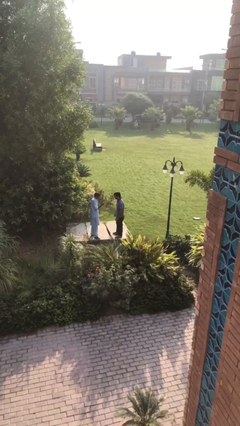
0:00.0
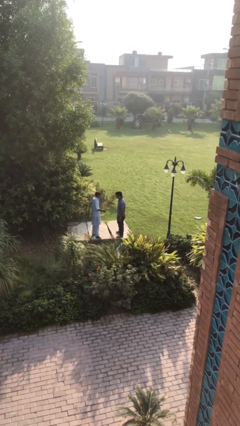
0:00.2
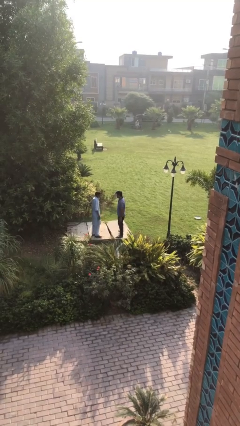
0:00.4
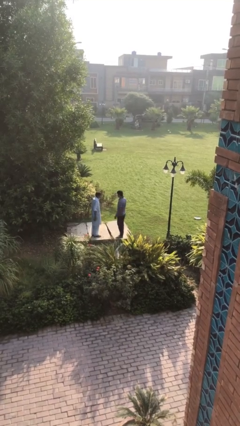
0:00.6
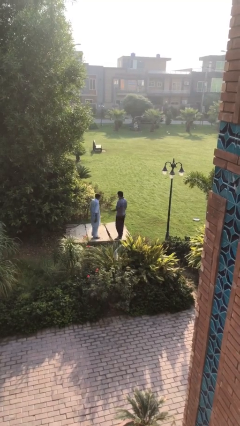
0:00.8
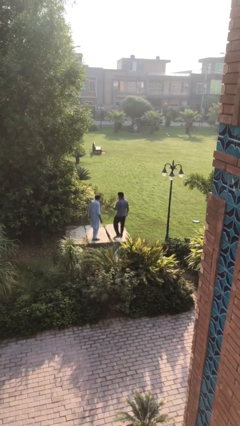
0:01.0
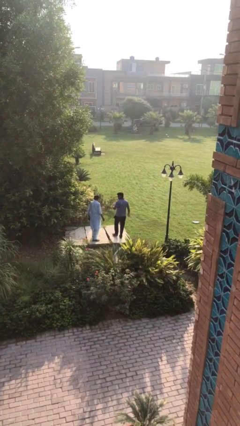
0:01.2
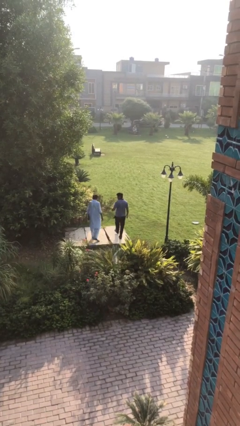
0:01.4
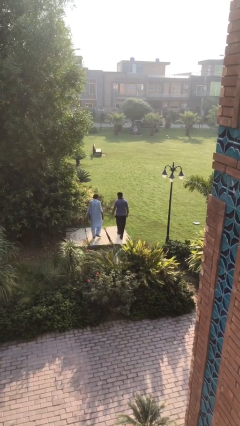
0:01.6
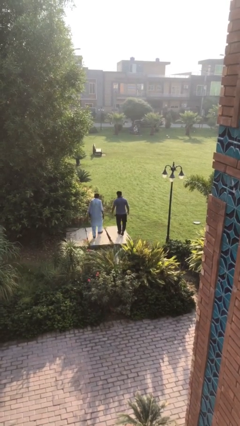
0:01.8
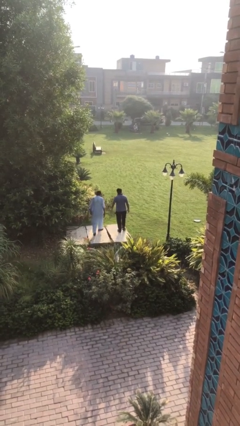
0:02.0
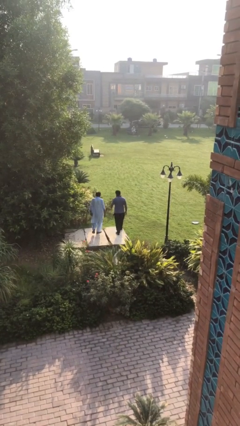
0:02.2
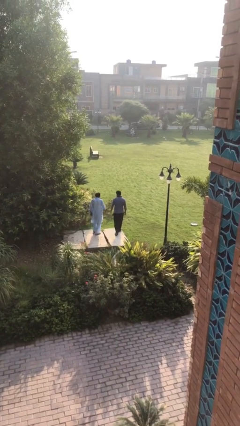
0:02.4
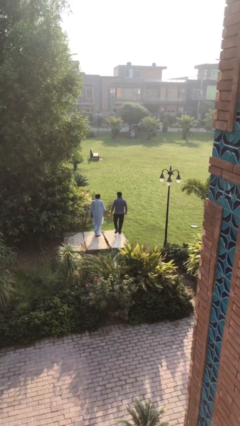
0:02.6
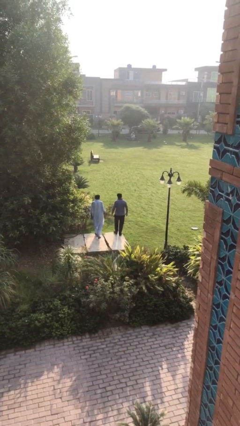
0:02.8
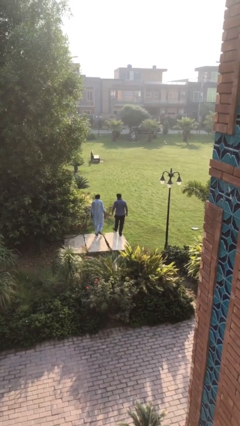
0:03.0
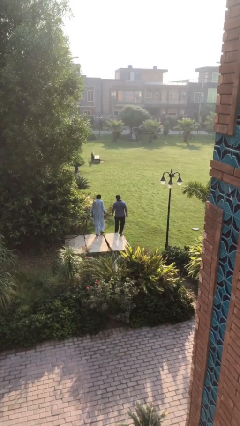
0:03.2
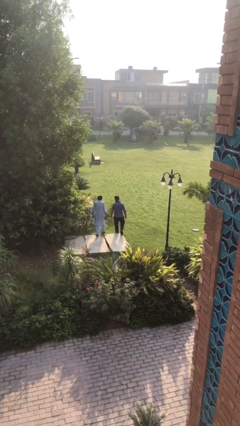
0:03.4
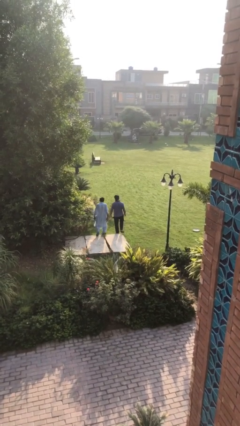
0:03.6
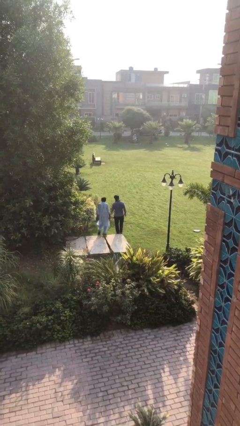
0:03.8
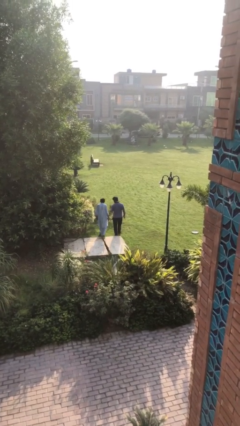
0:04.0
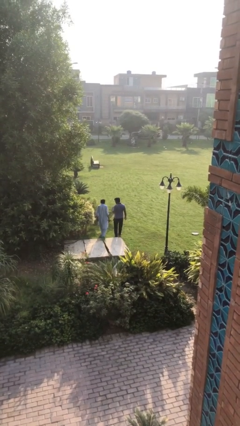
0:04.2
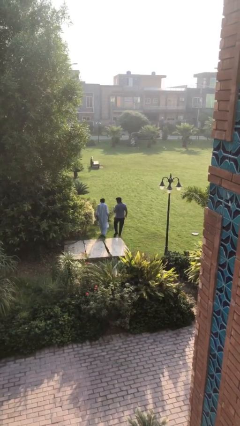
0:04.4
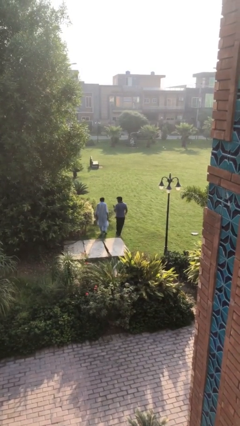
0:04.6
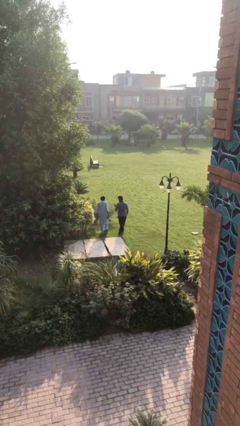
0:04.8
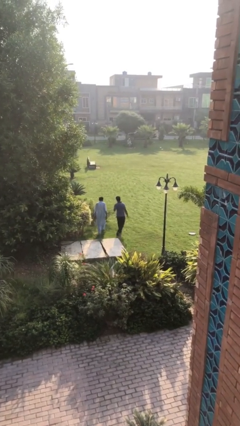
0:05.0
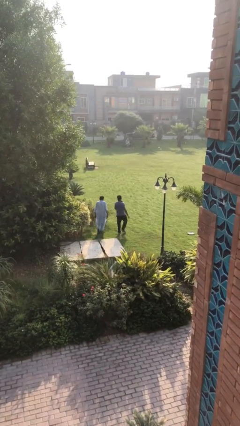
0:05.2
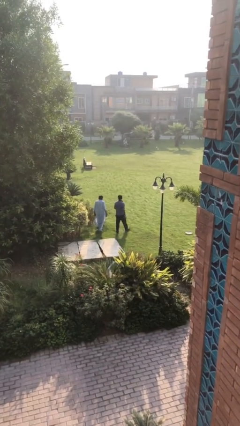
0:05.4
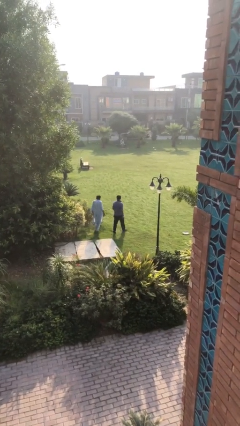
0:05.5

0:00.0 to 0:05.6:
person talks to person

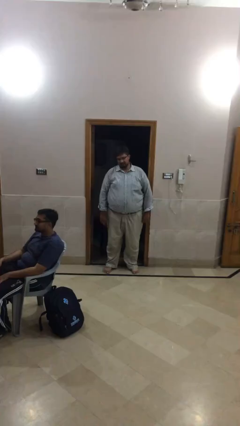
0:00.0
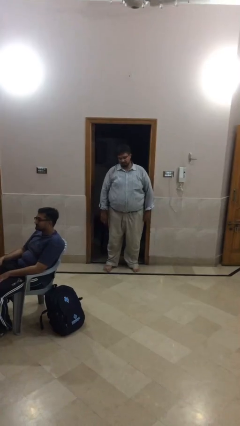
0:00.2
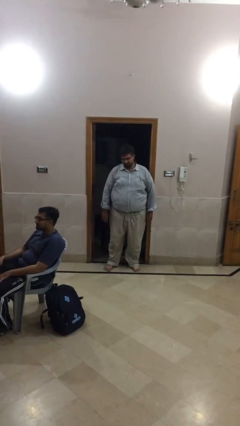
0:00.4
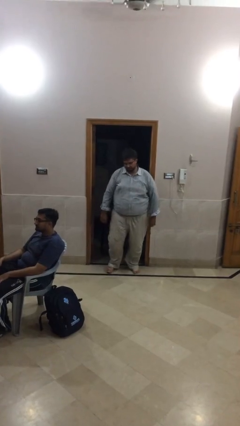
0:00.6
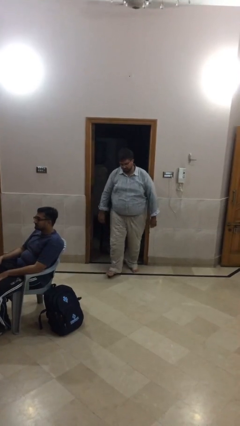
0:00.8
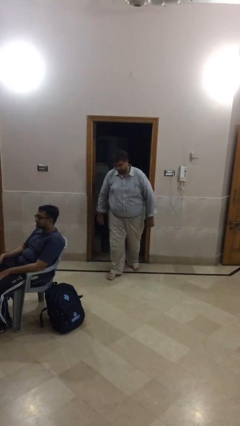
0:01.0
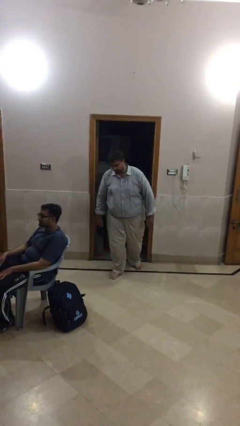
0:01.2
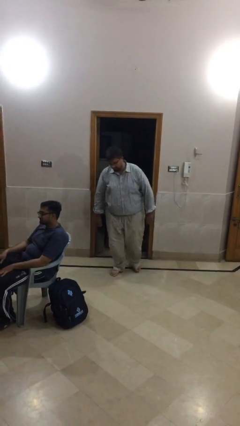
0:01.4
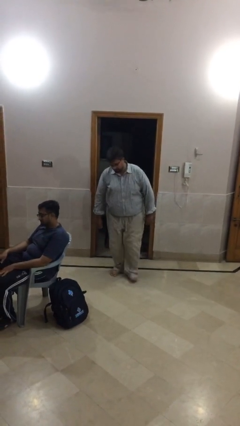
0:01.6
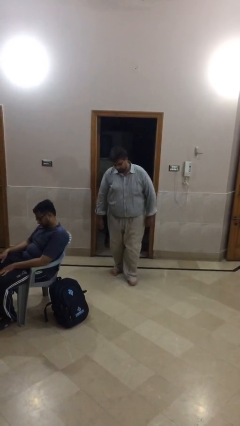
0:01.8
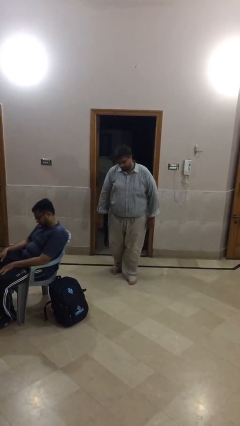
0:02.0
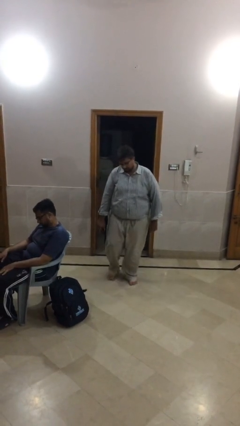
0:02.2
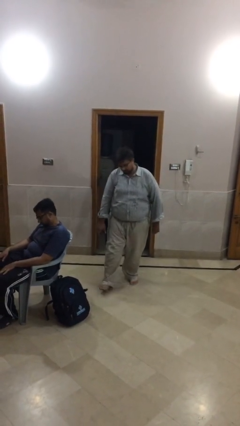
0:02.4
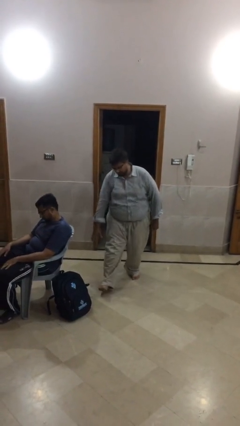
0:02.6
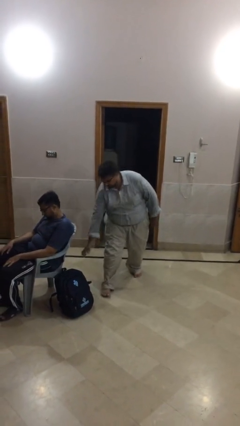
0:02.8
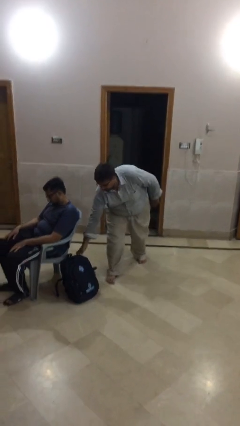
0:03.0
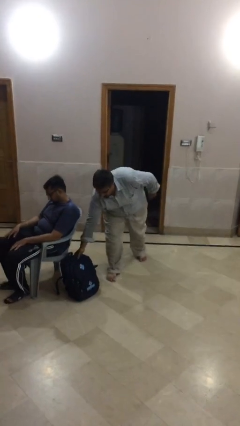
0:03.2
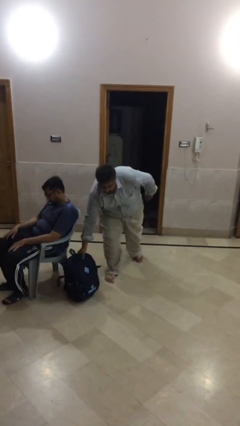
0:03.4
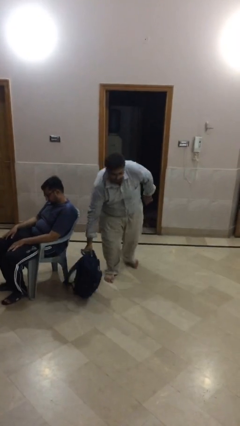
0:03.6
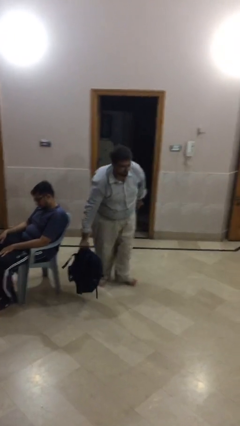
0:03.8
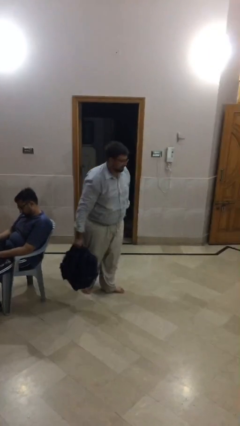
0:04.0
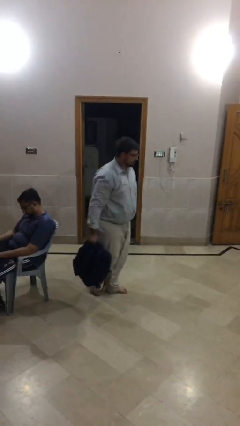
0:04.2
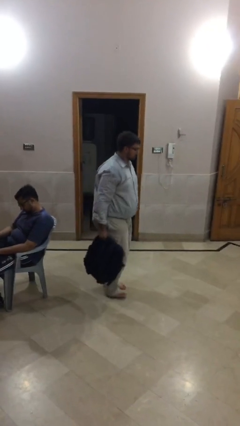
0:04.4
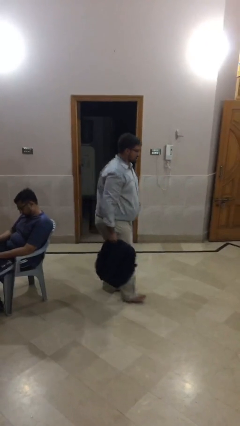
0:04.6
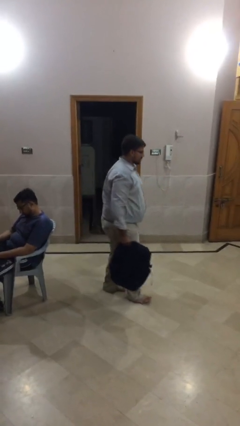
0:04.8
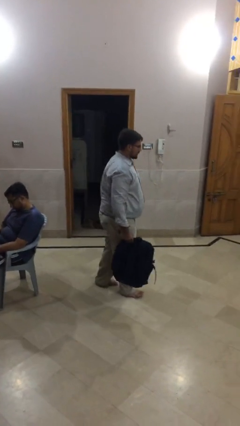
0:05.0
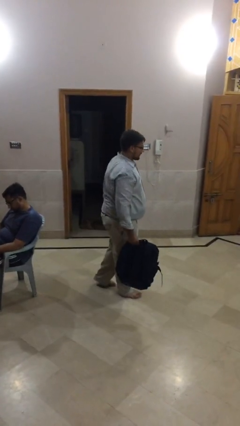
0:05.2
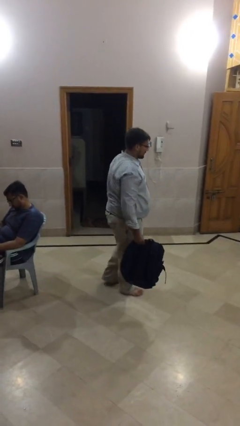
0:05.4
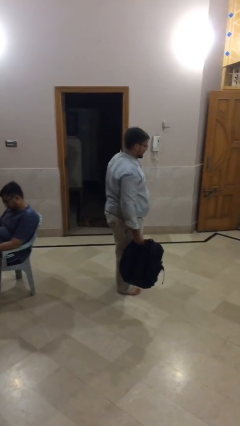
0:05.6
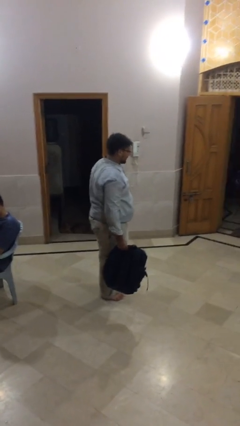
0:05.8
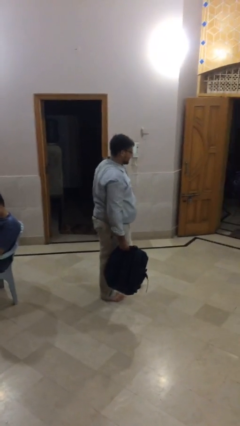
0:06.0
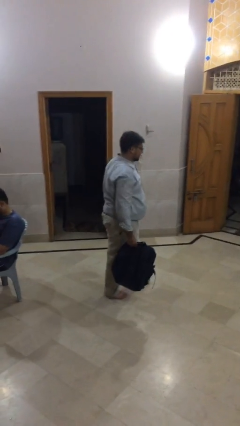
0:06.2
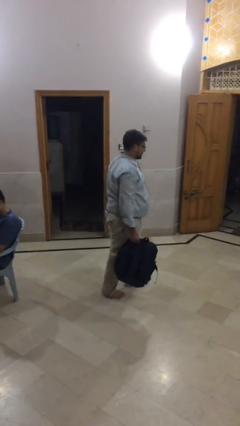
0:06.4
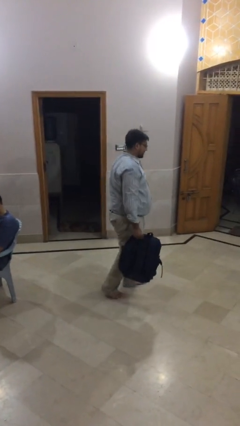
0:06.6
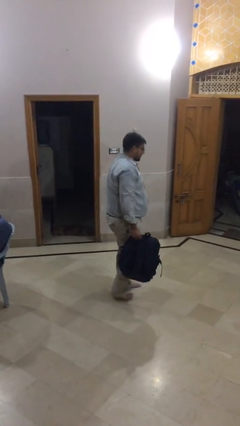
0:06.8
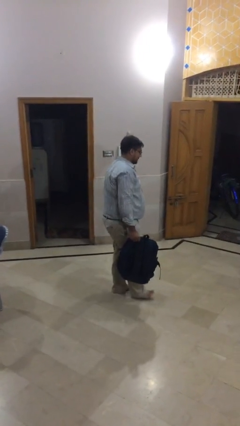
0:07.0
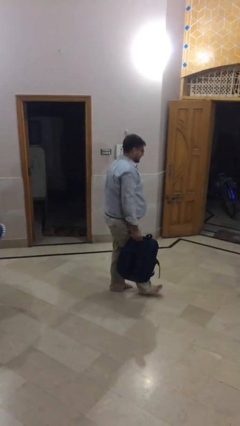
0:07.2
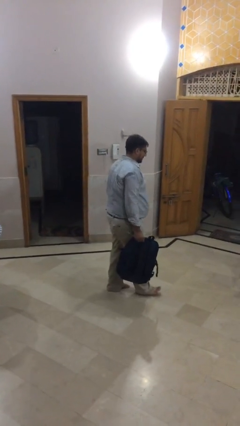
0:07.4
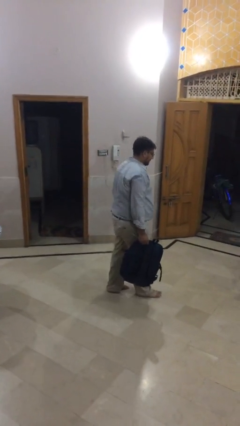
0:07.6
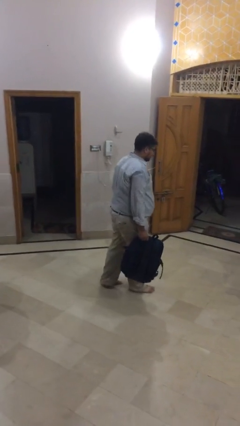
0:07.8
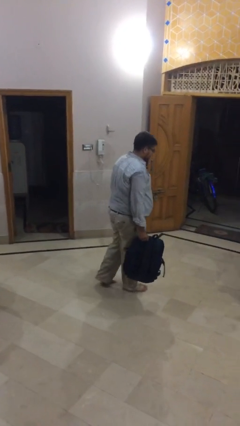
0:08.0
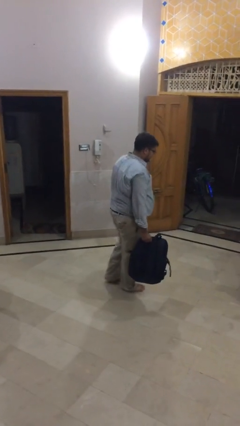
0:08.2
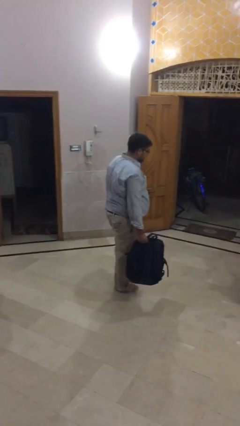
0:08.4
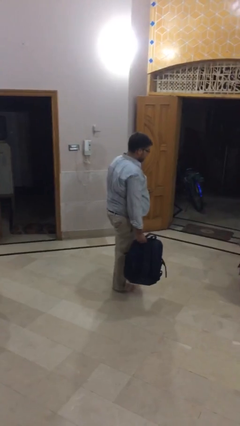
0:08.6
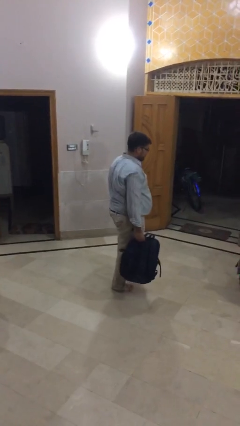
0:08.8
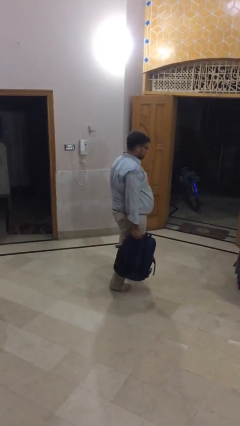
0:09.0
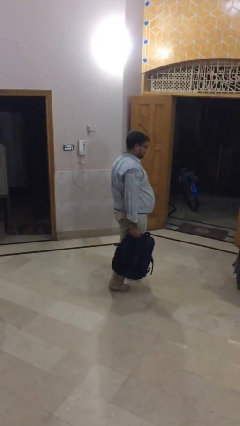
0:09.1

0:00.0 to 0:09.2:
person steals object from person

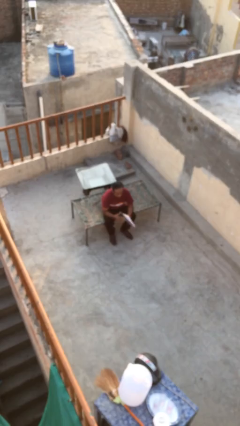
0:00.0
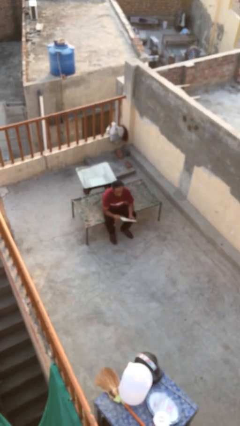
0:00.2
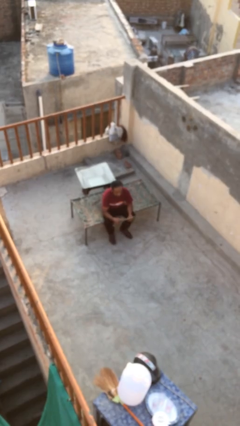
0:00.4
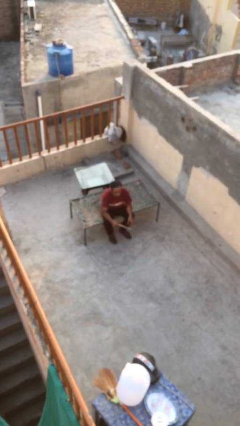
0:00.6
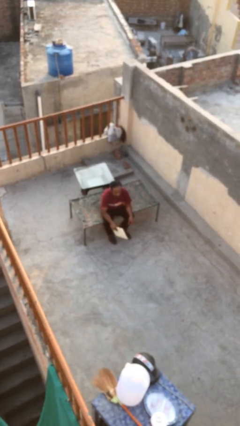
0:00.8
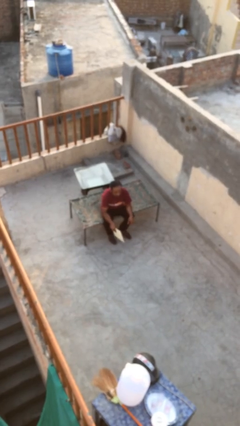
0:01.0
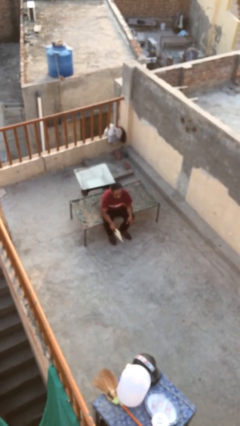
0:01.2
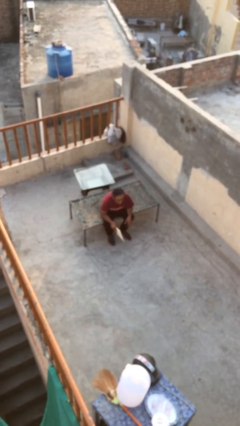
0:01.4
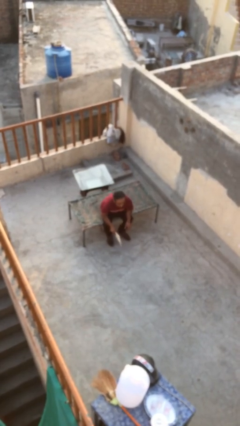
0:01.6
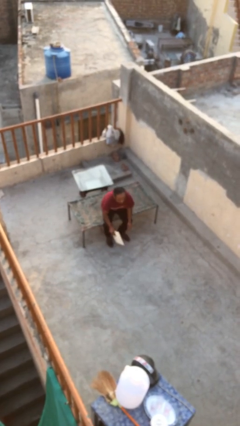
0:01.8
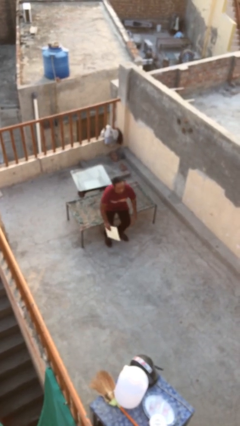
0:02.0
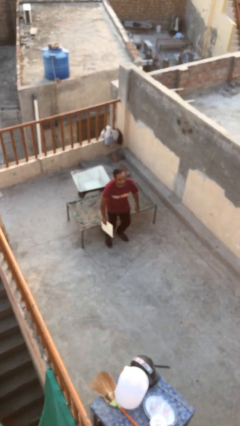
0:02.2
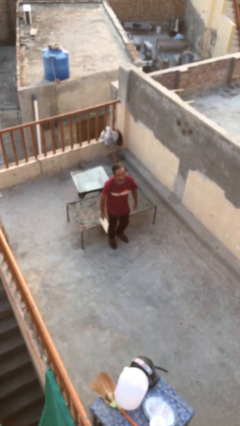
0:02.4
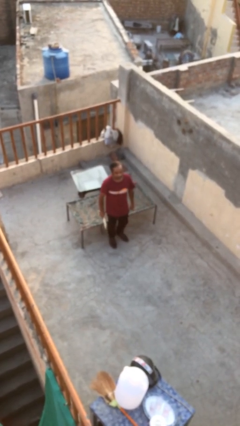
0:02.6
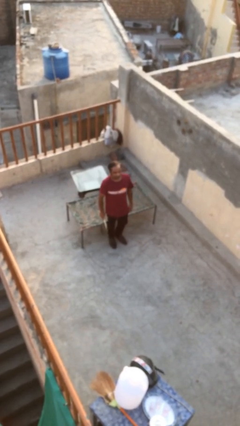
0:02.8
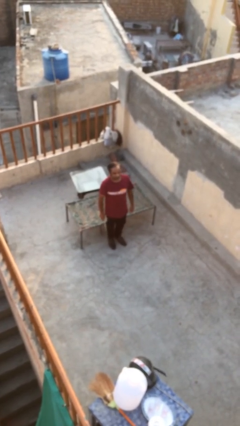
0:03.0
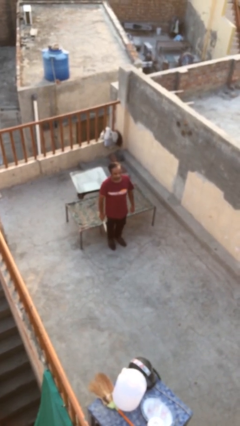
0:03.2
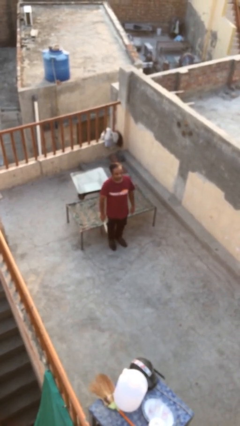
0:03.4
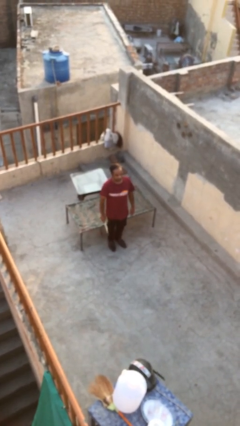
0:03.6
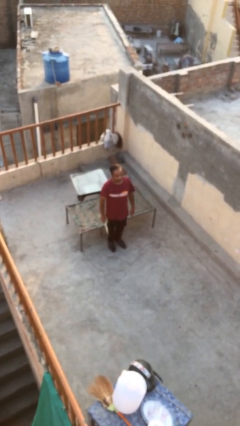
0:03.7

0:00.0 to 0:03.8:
person stands up
